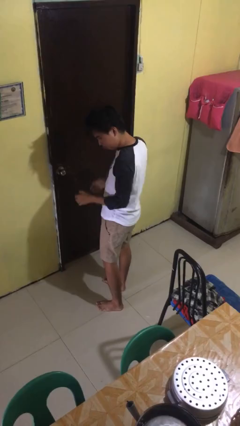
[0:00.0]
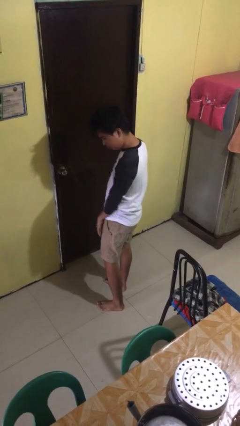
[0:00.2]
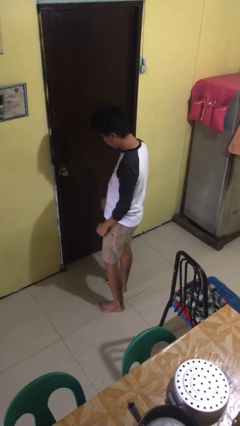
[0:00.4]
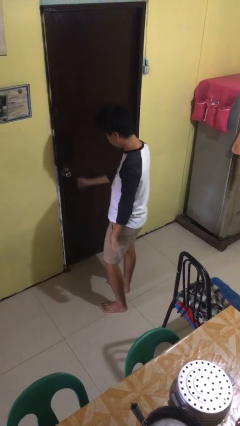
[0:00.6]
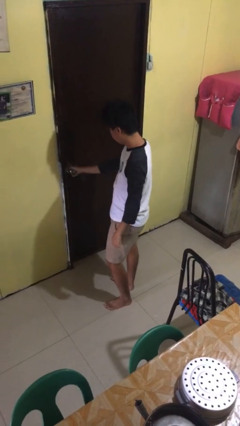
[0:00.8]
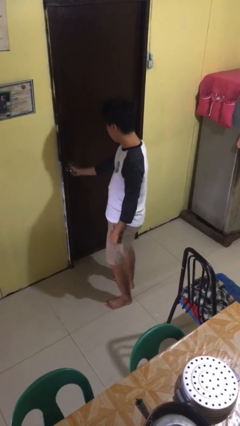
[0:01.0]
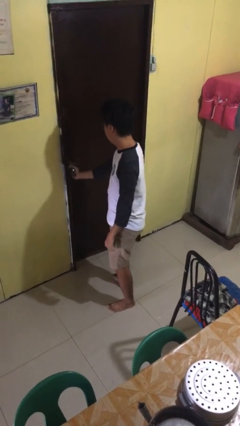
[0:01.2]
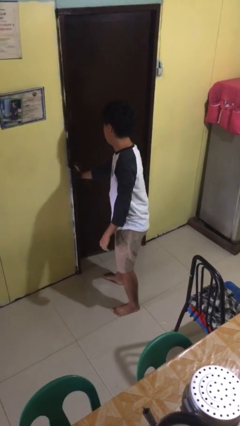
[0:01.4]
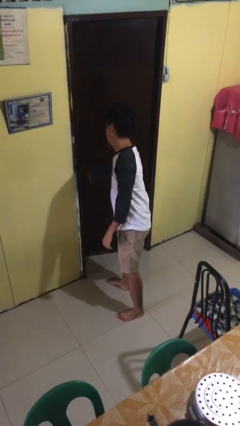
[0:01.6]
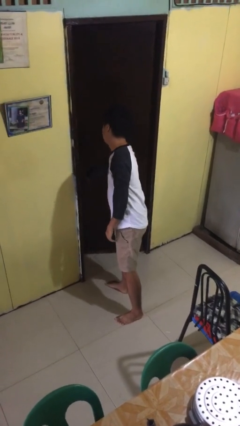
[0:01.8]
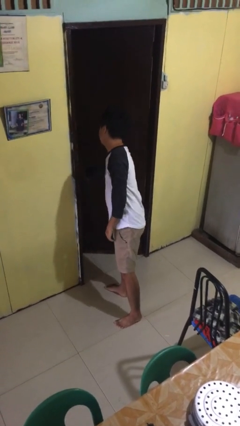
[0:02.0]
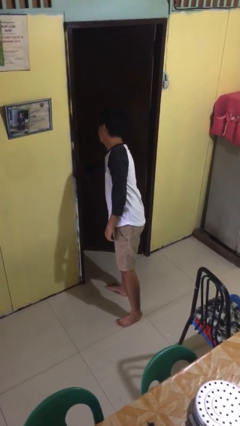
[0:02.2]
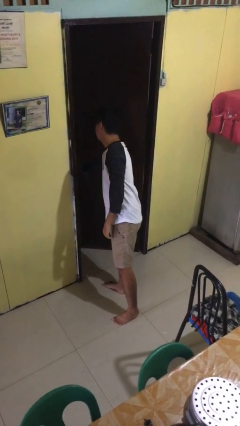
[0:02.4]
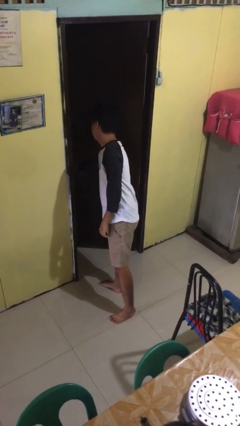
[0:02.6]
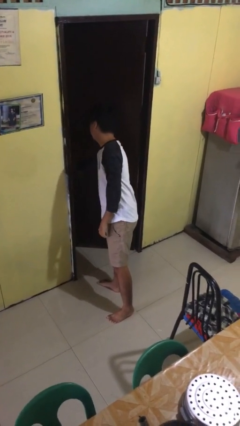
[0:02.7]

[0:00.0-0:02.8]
person opens facility door

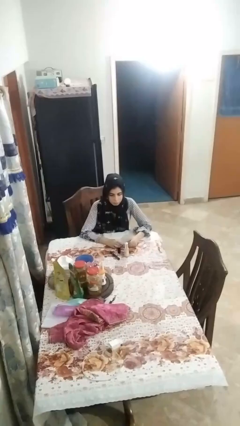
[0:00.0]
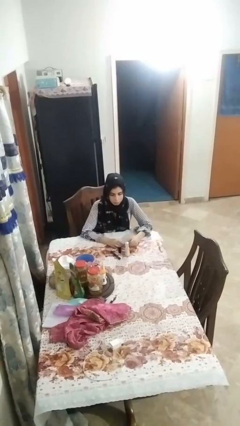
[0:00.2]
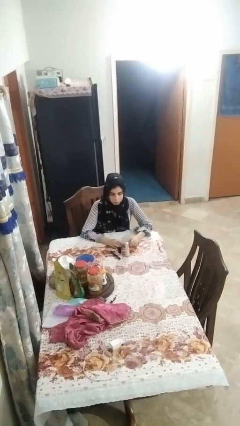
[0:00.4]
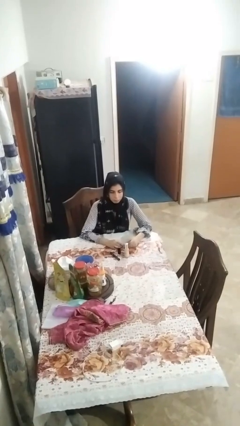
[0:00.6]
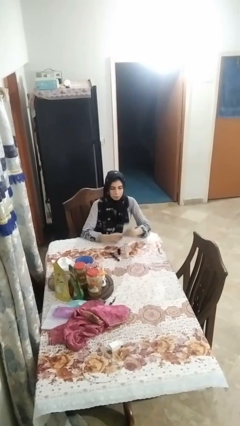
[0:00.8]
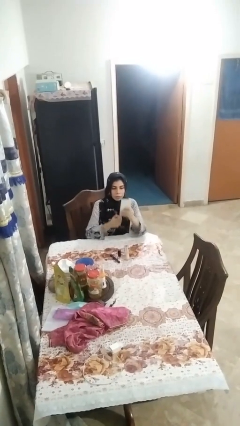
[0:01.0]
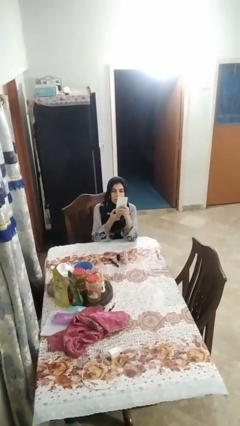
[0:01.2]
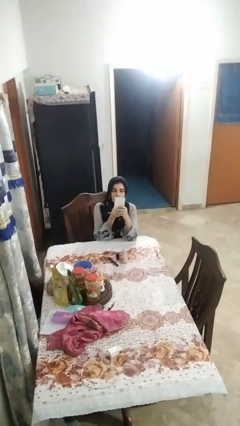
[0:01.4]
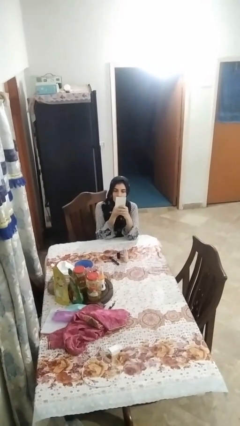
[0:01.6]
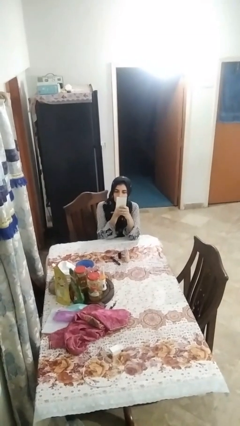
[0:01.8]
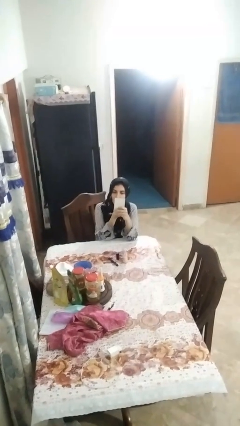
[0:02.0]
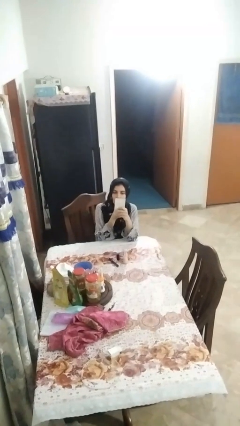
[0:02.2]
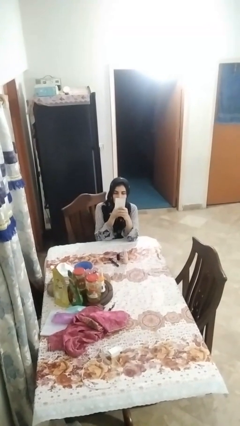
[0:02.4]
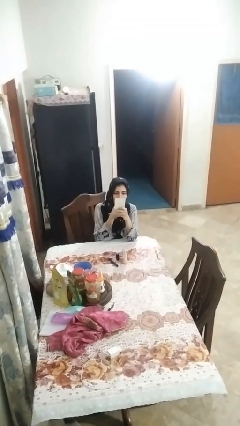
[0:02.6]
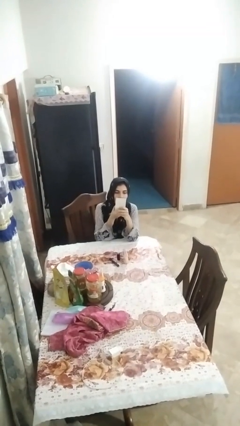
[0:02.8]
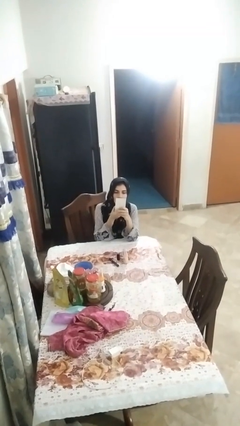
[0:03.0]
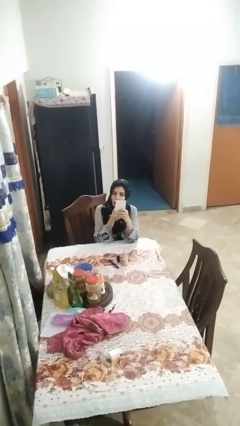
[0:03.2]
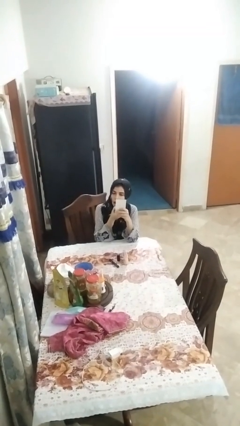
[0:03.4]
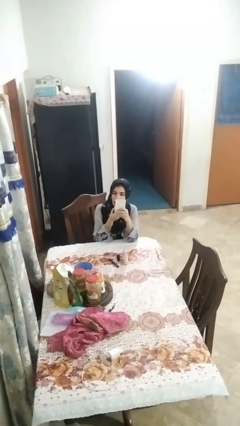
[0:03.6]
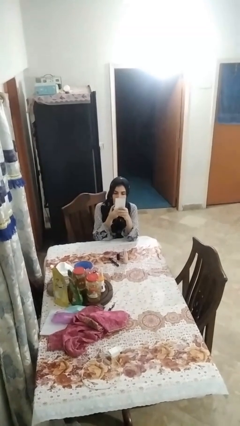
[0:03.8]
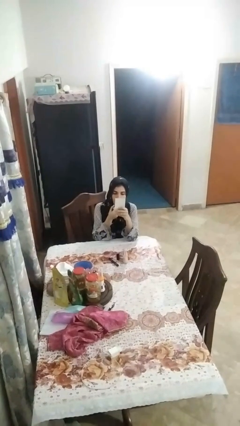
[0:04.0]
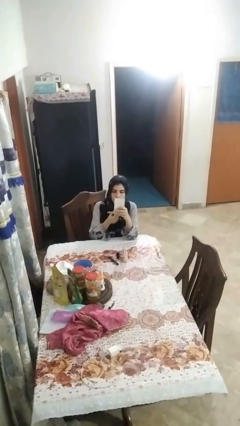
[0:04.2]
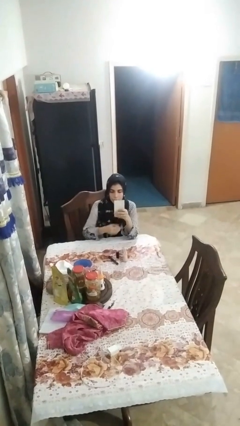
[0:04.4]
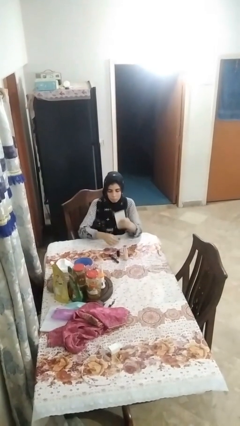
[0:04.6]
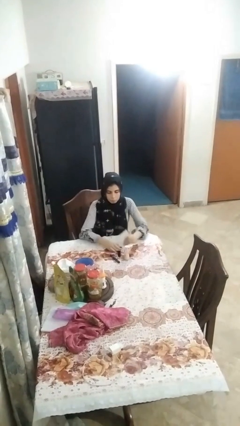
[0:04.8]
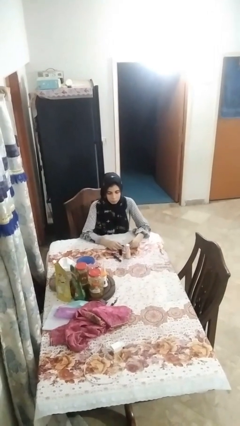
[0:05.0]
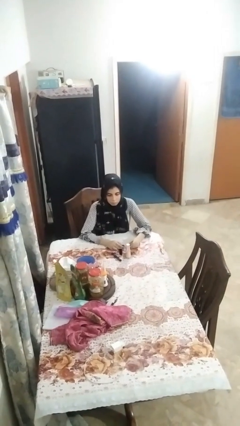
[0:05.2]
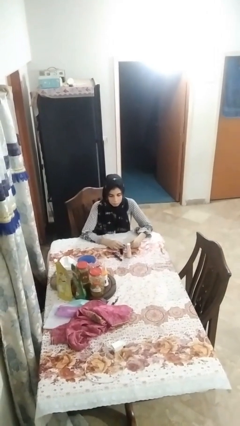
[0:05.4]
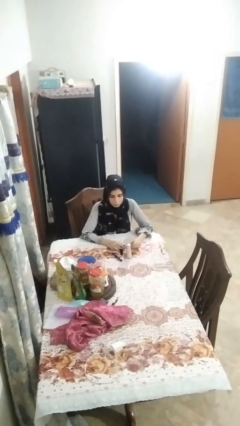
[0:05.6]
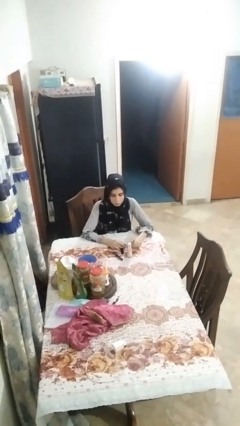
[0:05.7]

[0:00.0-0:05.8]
person applies lip makeup

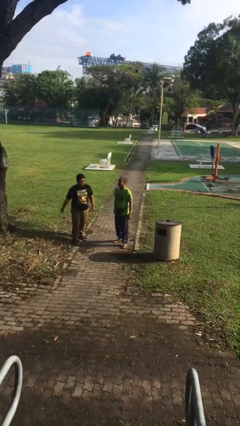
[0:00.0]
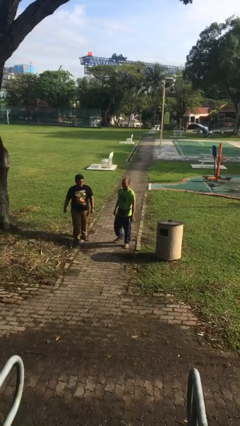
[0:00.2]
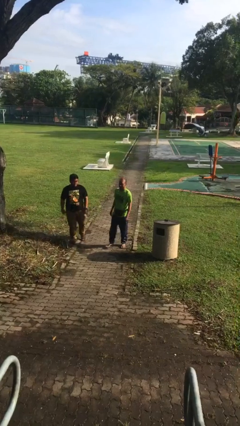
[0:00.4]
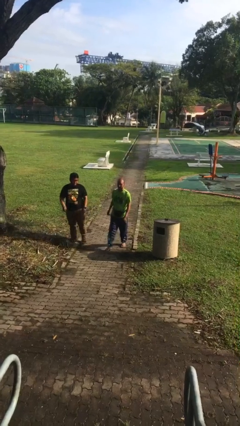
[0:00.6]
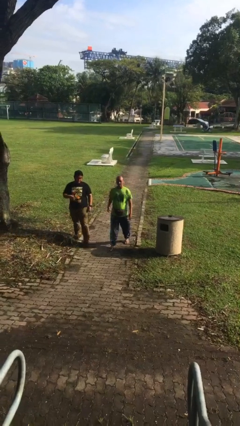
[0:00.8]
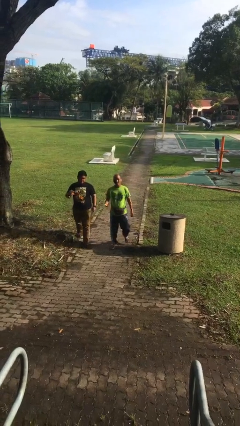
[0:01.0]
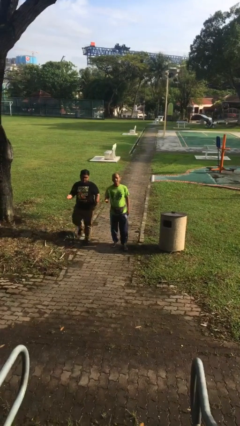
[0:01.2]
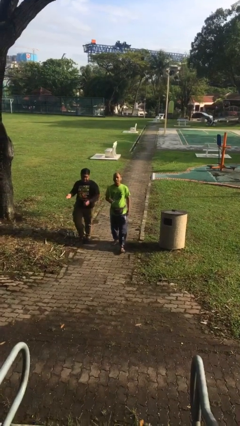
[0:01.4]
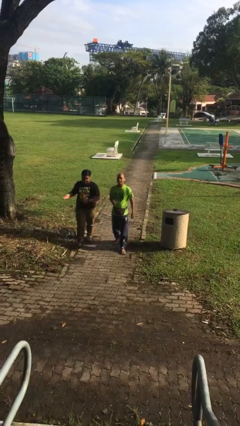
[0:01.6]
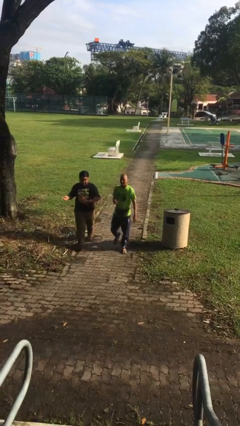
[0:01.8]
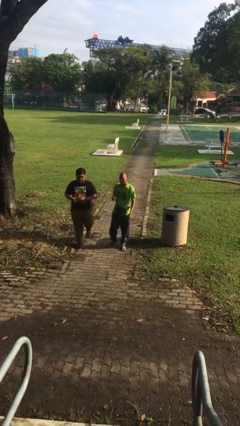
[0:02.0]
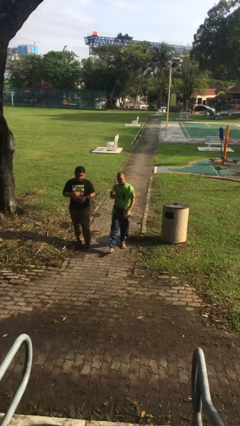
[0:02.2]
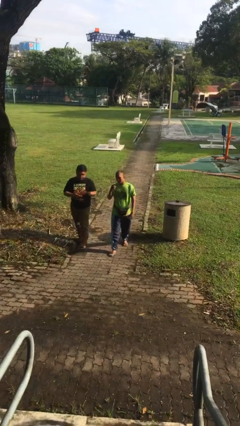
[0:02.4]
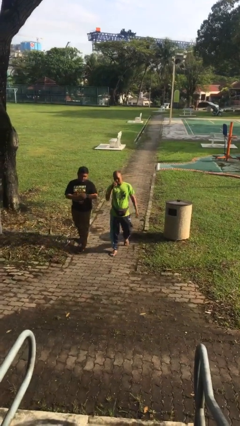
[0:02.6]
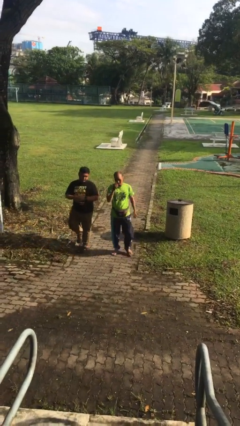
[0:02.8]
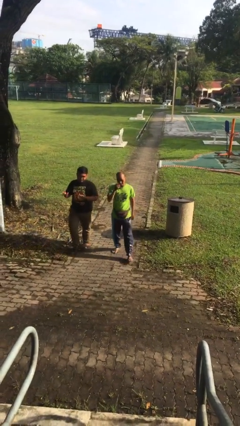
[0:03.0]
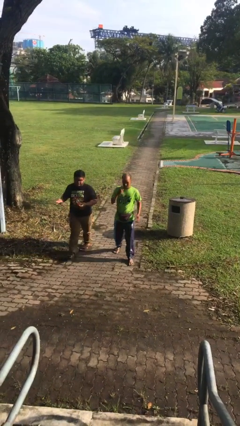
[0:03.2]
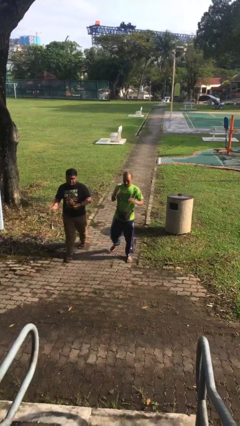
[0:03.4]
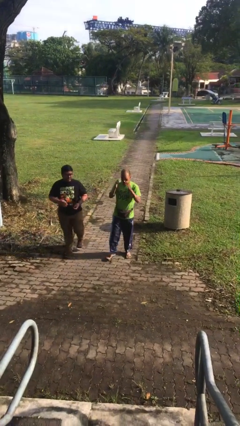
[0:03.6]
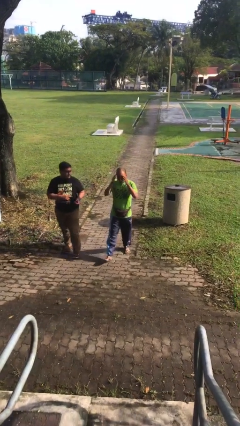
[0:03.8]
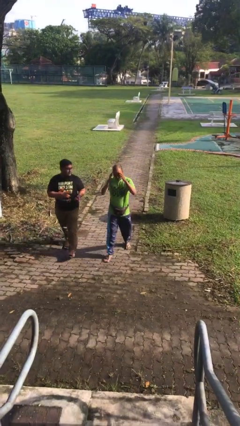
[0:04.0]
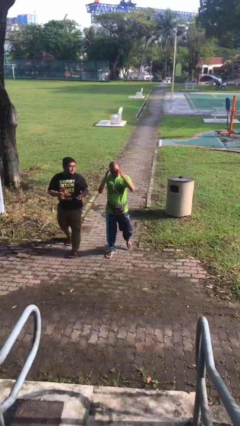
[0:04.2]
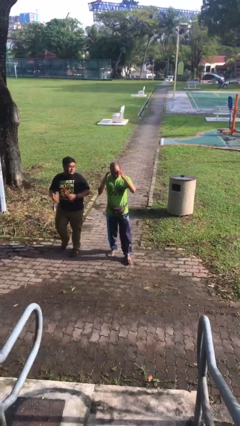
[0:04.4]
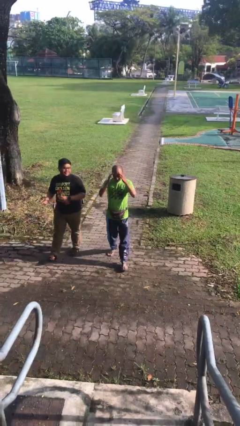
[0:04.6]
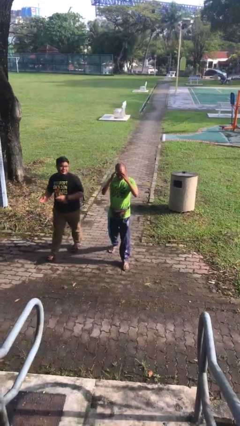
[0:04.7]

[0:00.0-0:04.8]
person talks to person

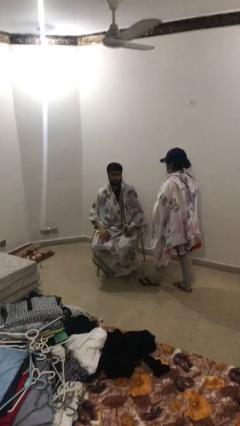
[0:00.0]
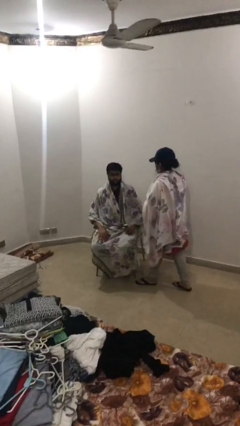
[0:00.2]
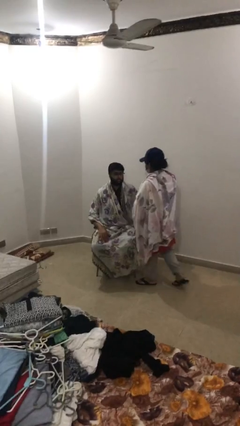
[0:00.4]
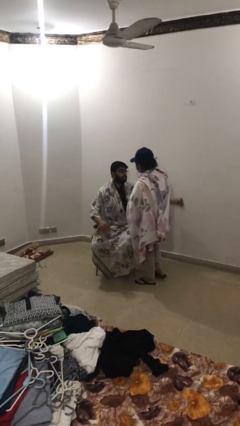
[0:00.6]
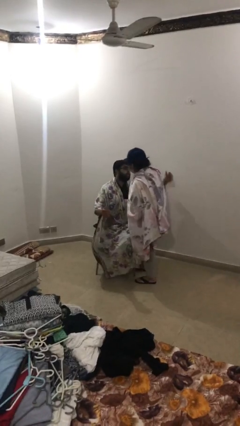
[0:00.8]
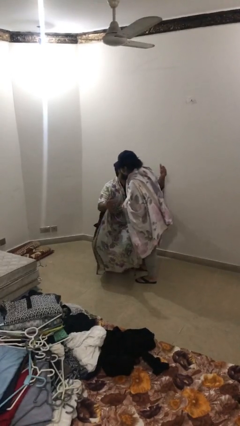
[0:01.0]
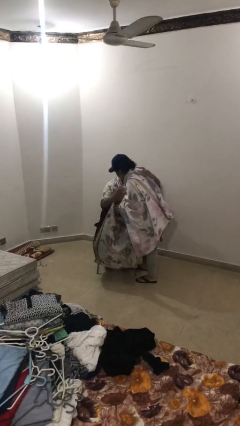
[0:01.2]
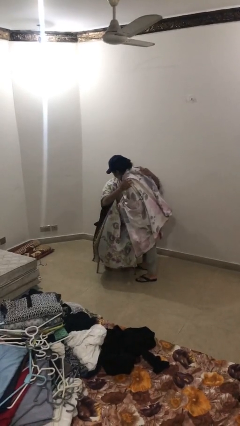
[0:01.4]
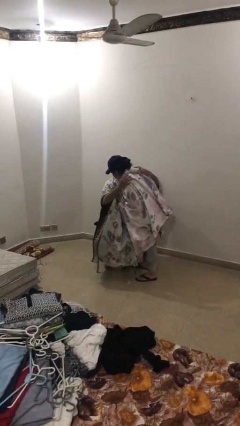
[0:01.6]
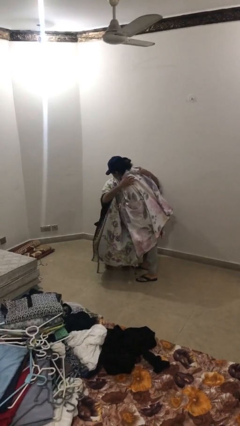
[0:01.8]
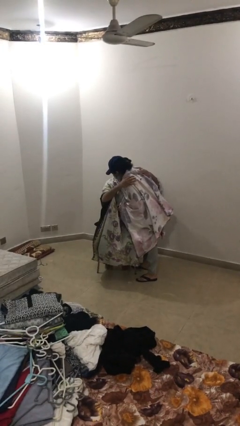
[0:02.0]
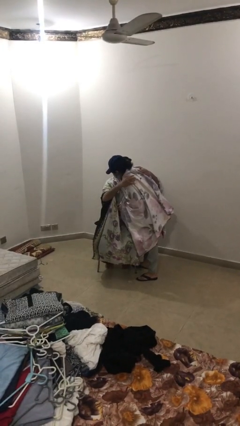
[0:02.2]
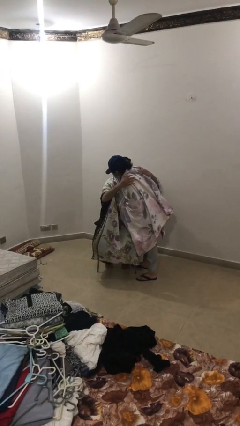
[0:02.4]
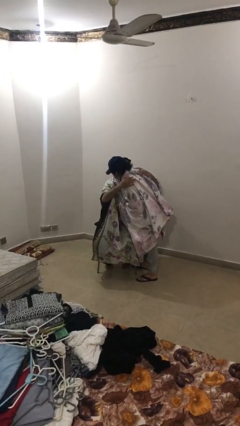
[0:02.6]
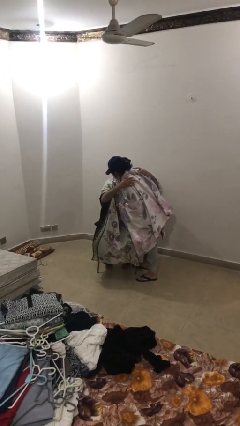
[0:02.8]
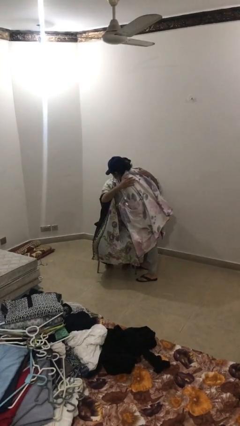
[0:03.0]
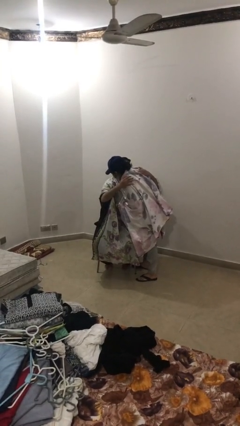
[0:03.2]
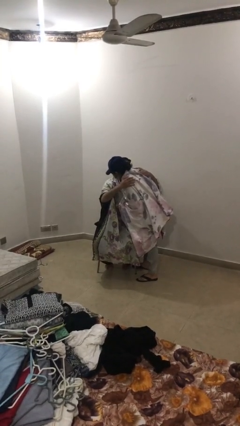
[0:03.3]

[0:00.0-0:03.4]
person embraces person

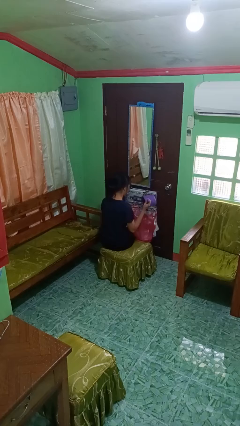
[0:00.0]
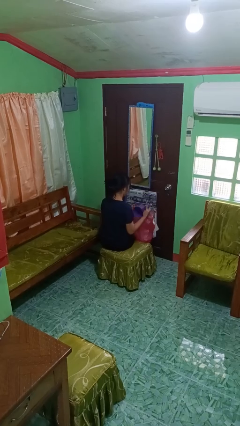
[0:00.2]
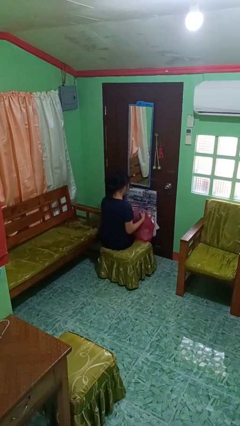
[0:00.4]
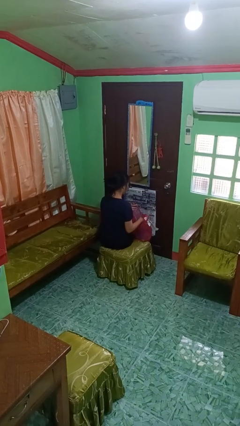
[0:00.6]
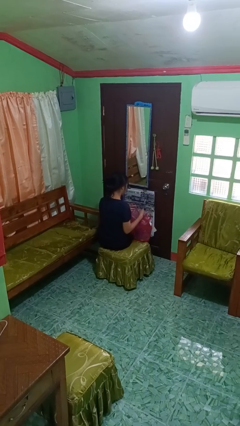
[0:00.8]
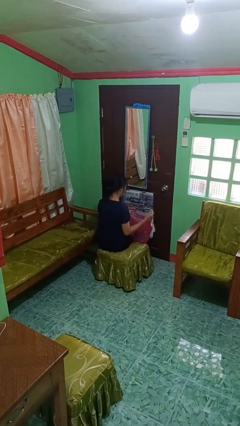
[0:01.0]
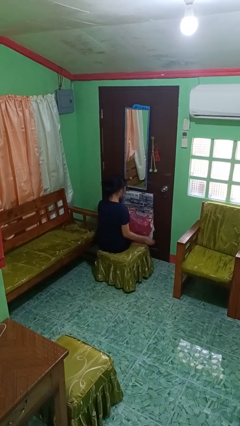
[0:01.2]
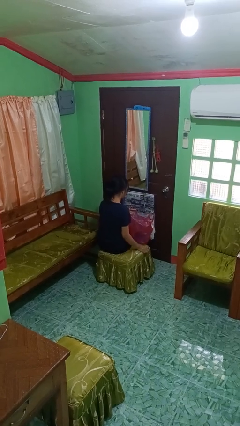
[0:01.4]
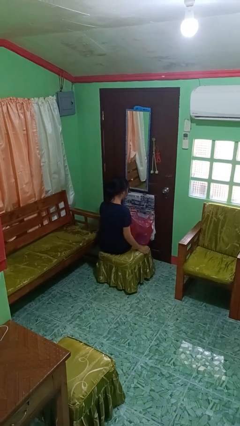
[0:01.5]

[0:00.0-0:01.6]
person puts object into bag
